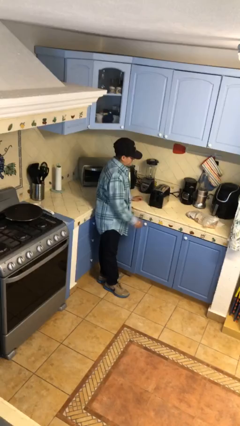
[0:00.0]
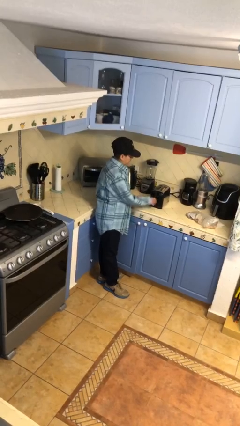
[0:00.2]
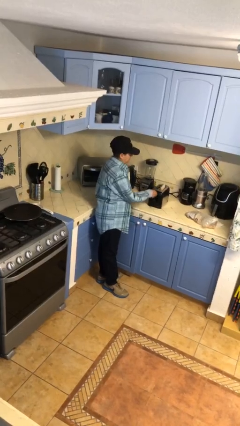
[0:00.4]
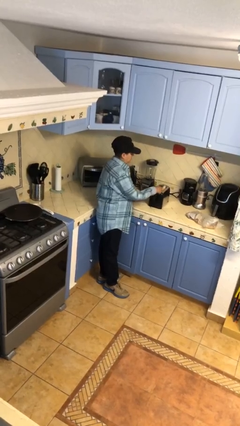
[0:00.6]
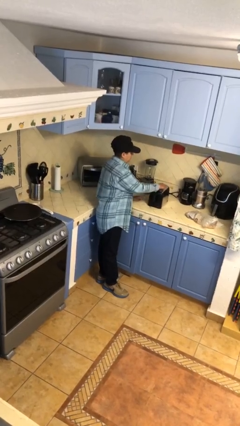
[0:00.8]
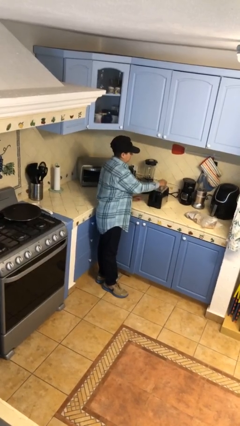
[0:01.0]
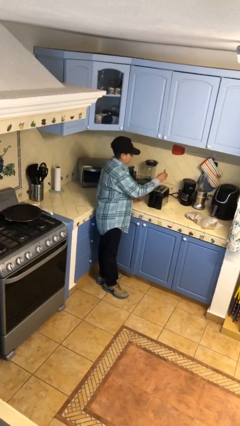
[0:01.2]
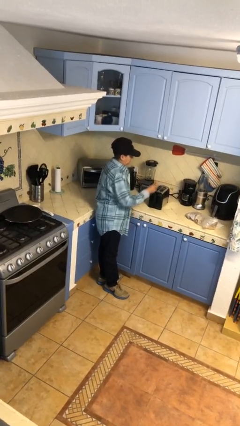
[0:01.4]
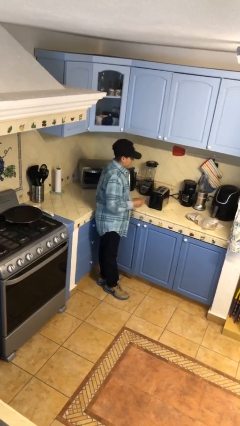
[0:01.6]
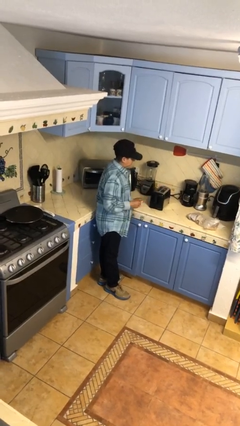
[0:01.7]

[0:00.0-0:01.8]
person takes object from toaster

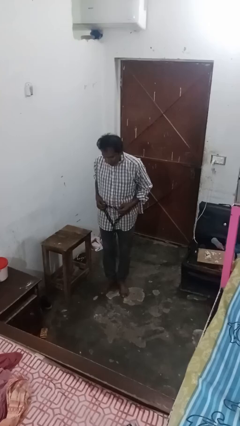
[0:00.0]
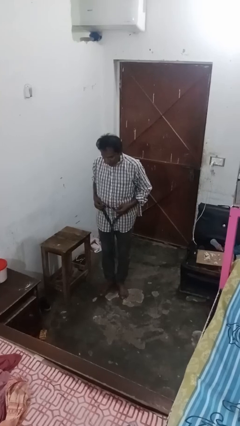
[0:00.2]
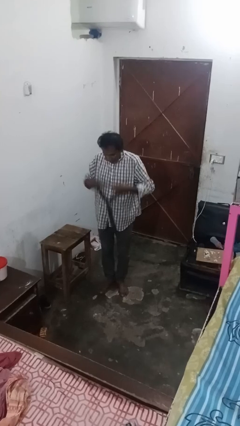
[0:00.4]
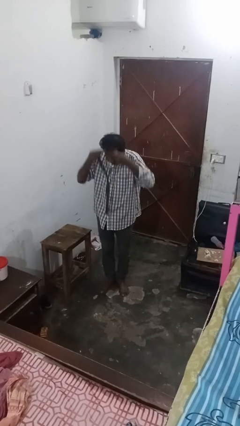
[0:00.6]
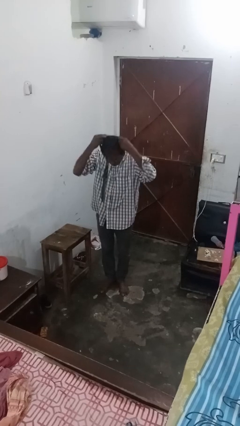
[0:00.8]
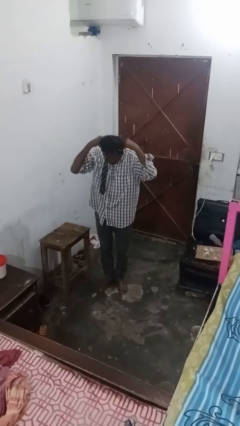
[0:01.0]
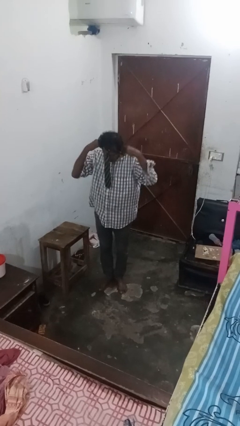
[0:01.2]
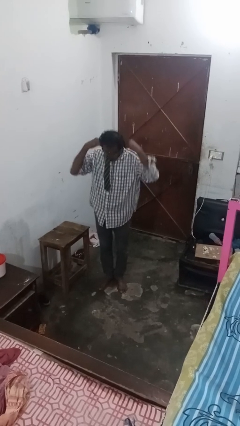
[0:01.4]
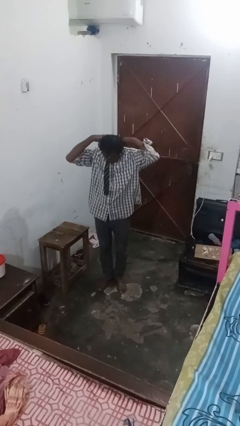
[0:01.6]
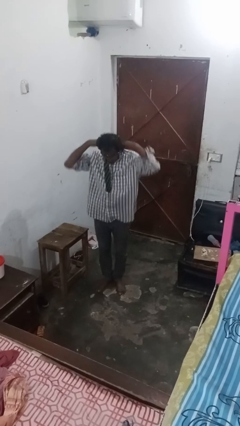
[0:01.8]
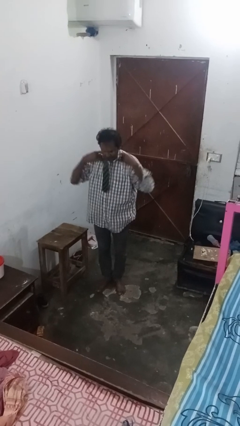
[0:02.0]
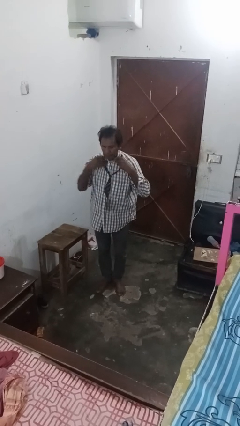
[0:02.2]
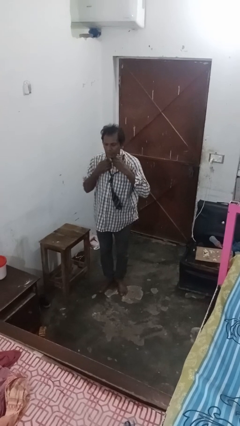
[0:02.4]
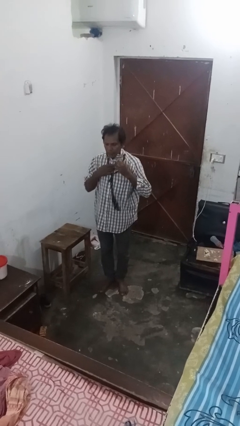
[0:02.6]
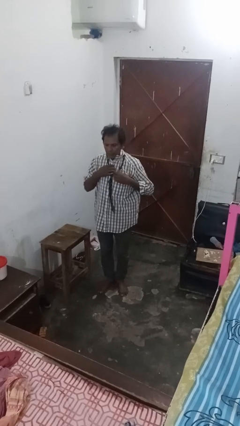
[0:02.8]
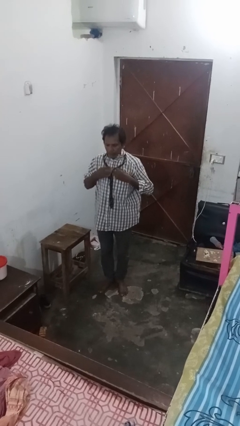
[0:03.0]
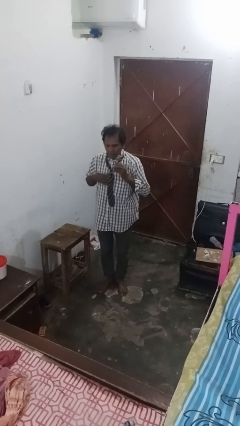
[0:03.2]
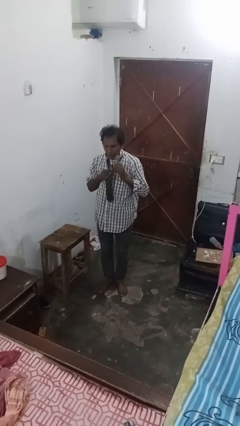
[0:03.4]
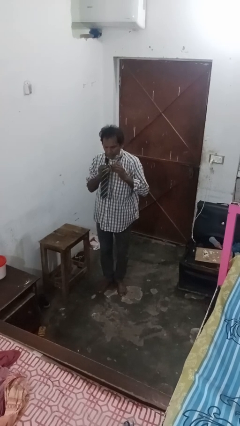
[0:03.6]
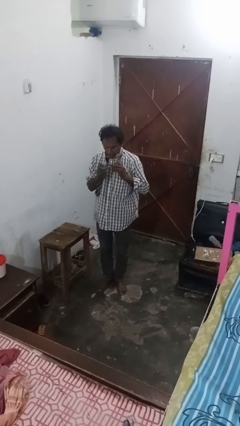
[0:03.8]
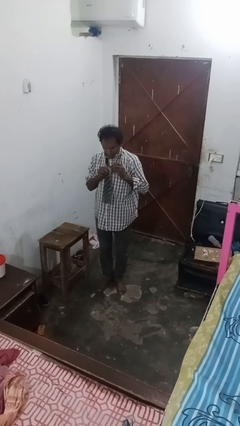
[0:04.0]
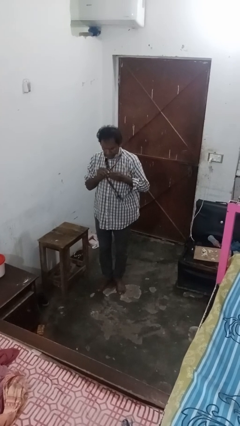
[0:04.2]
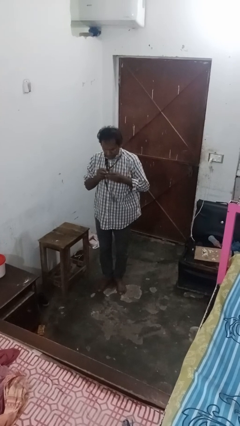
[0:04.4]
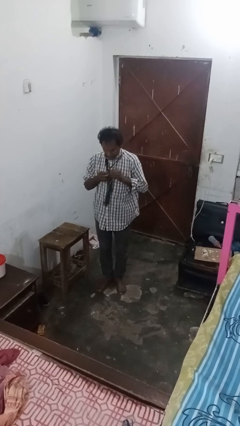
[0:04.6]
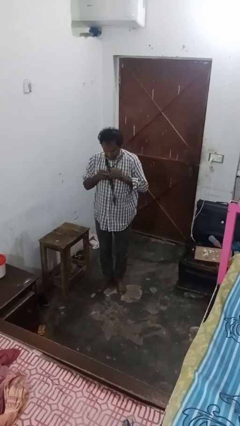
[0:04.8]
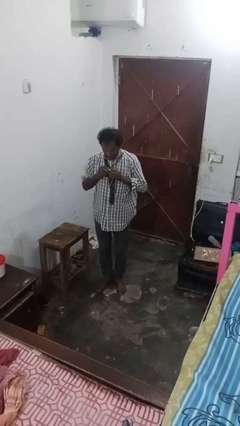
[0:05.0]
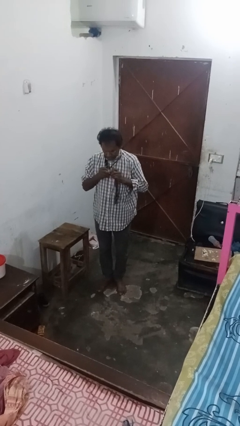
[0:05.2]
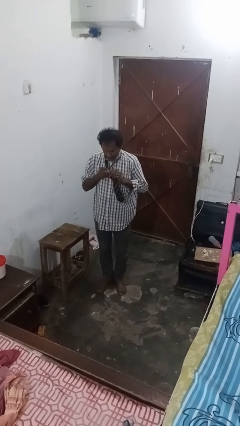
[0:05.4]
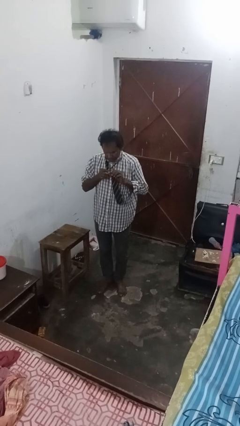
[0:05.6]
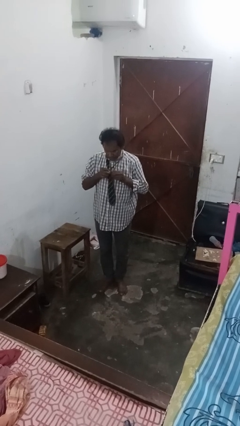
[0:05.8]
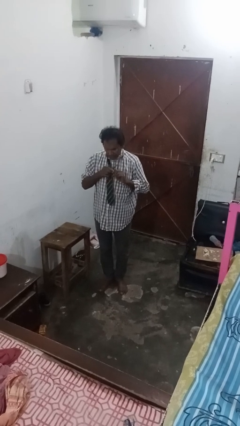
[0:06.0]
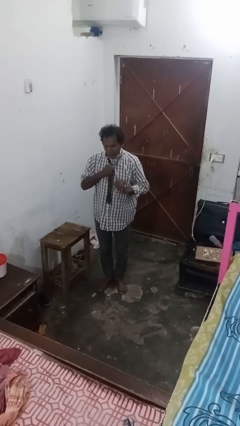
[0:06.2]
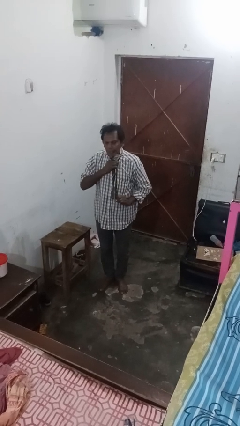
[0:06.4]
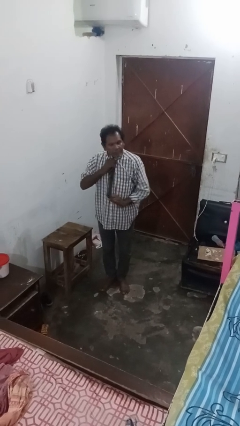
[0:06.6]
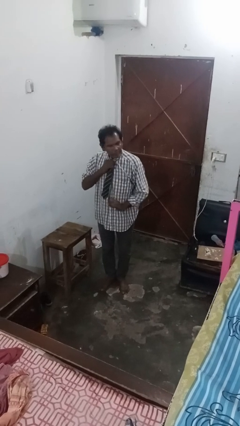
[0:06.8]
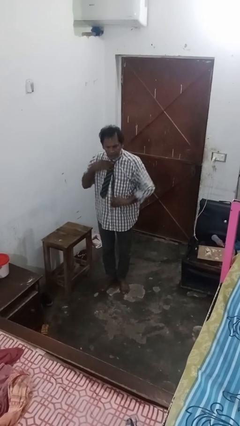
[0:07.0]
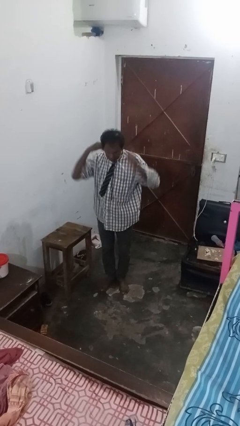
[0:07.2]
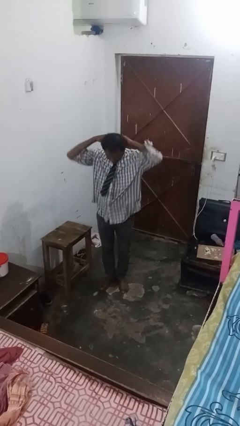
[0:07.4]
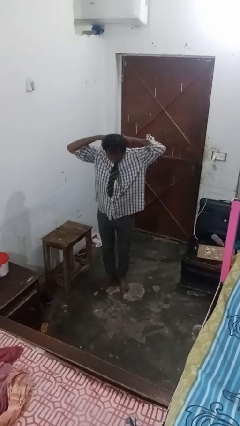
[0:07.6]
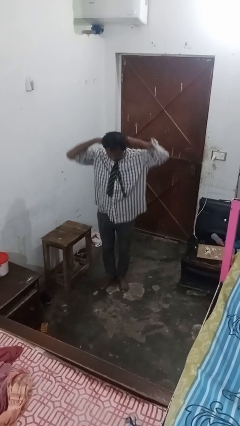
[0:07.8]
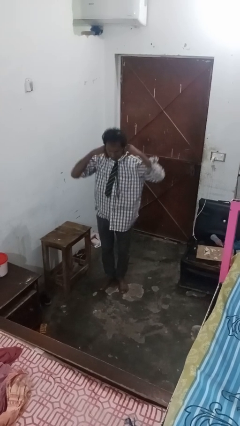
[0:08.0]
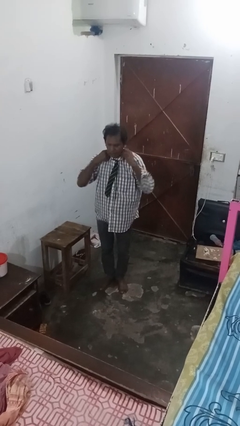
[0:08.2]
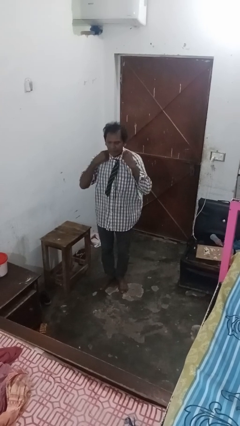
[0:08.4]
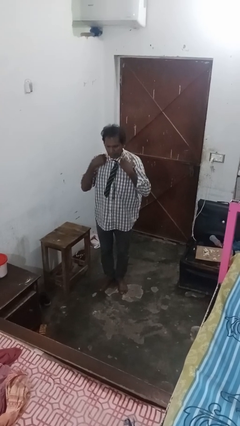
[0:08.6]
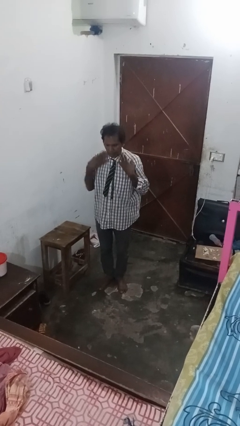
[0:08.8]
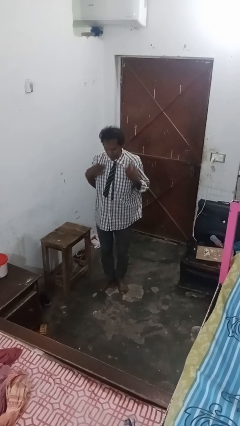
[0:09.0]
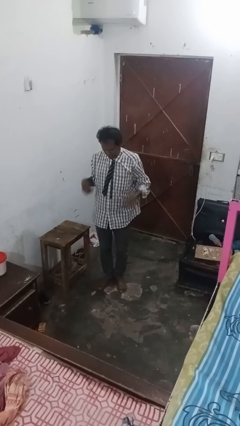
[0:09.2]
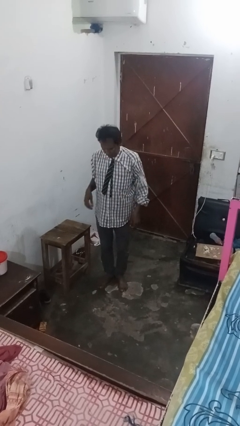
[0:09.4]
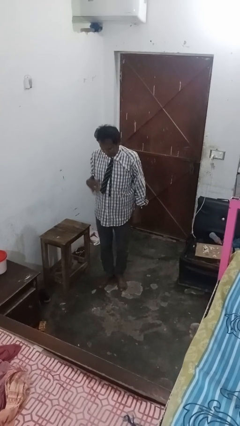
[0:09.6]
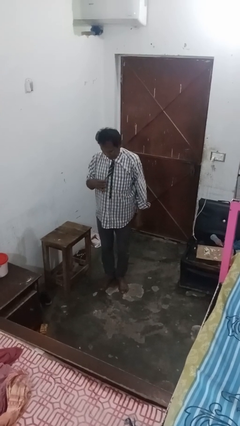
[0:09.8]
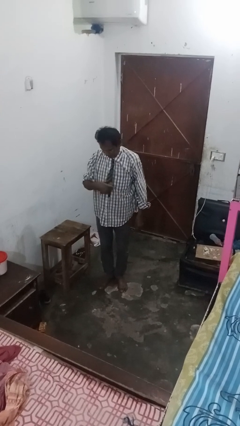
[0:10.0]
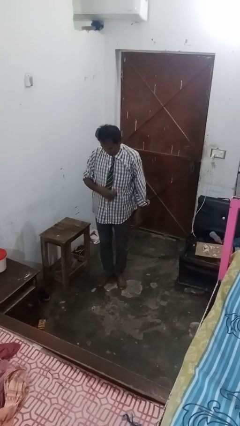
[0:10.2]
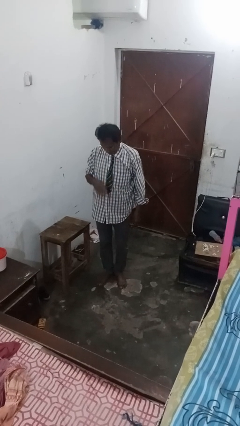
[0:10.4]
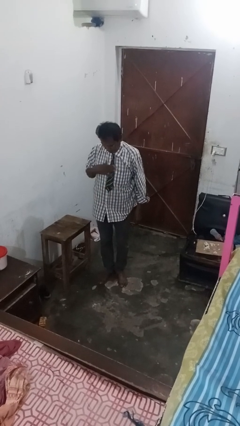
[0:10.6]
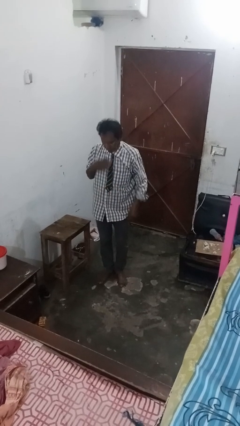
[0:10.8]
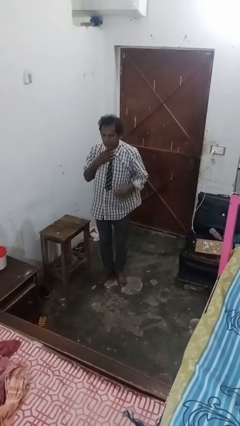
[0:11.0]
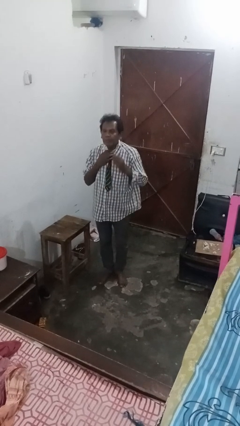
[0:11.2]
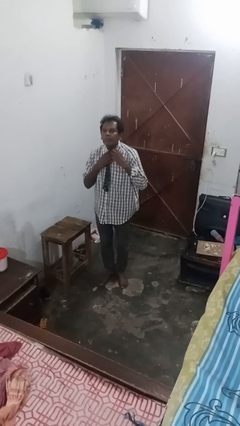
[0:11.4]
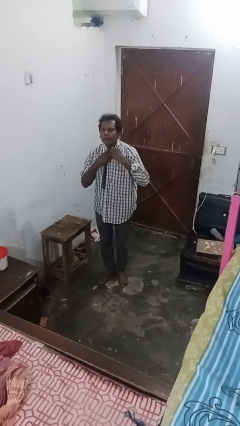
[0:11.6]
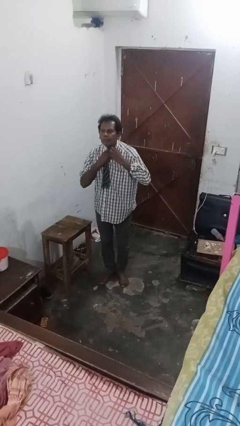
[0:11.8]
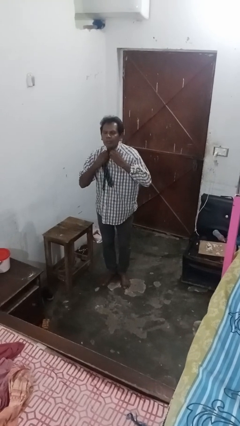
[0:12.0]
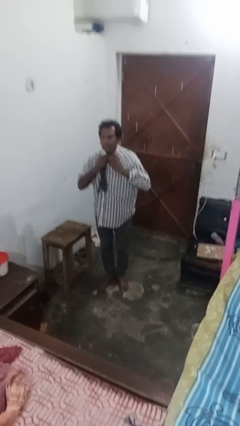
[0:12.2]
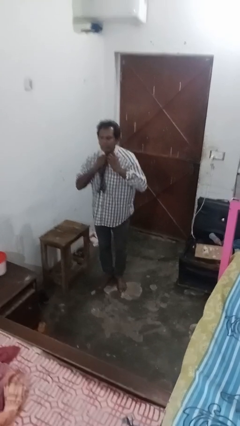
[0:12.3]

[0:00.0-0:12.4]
person puts on necktie

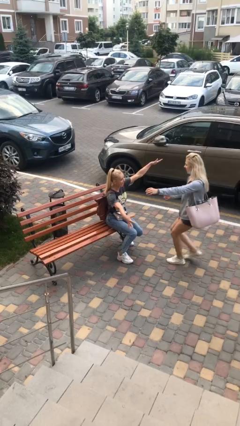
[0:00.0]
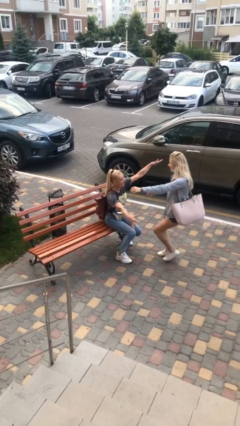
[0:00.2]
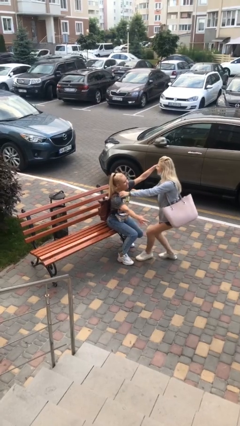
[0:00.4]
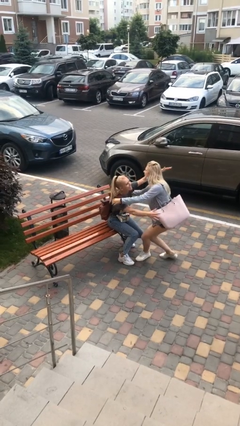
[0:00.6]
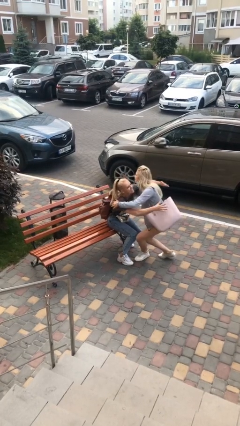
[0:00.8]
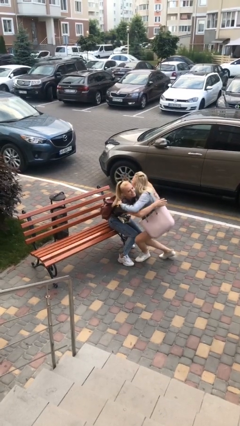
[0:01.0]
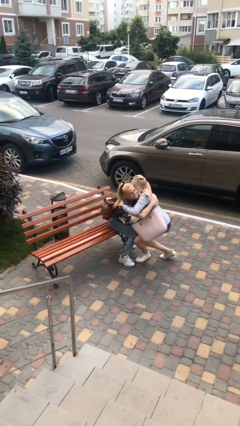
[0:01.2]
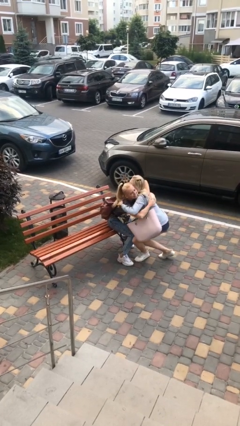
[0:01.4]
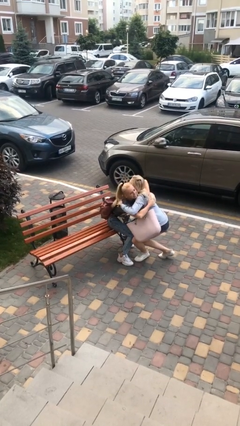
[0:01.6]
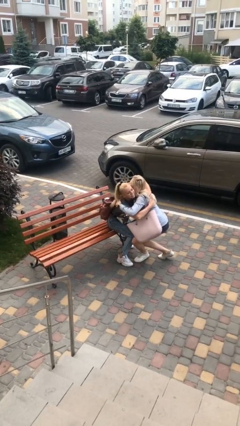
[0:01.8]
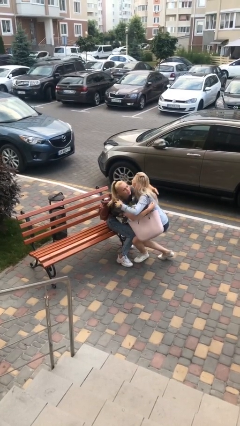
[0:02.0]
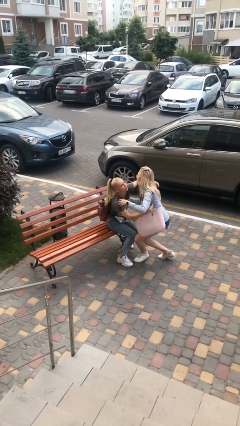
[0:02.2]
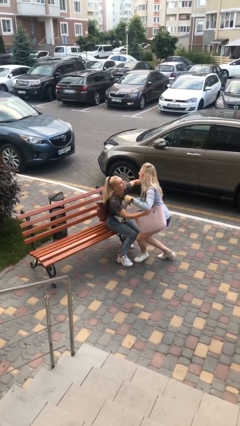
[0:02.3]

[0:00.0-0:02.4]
person embraces person

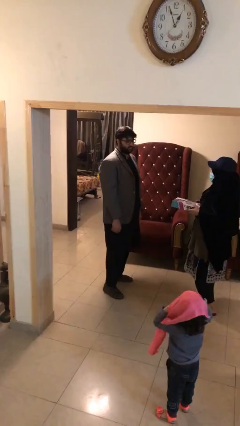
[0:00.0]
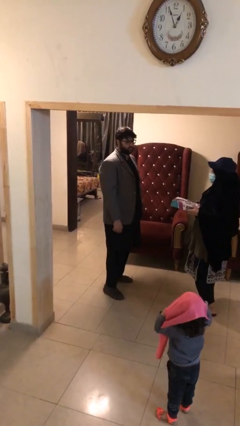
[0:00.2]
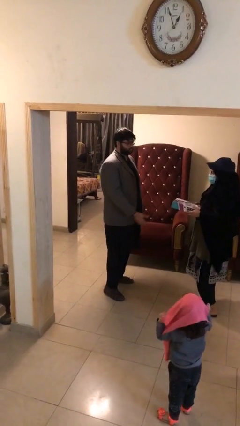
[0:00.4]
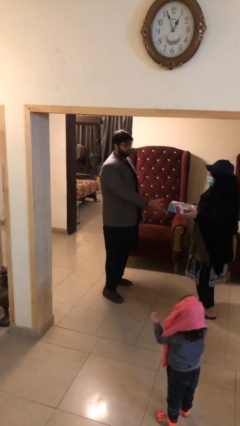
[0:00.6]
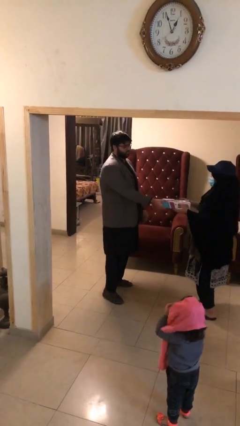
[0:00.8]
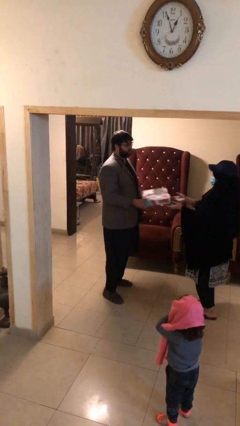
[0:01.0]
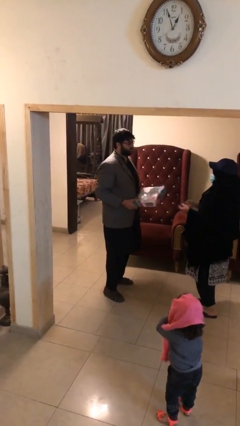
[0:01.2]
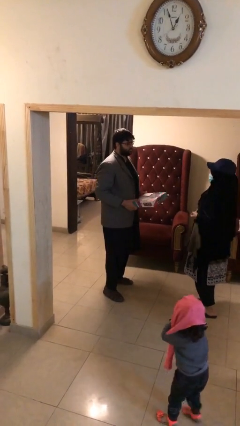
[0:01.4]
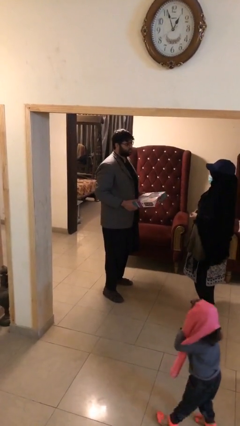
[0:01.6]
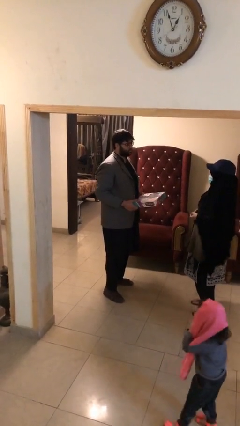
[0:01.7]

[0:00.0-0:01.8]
person transfers object to person
